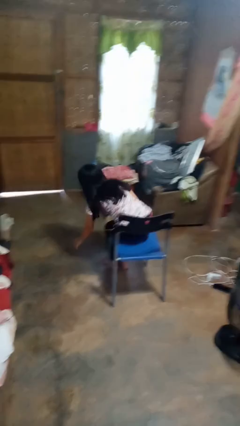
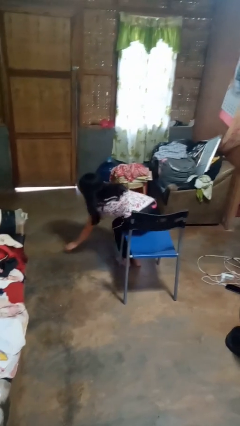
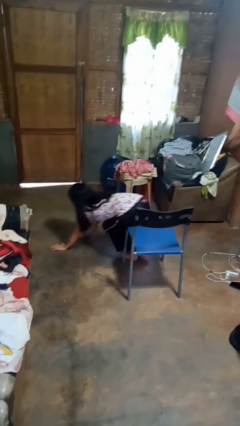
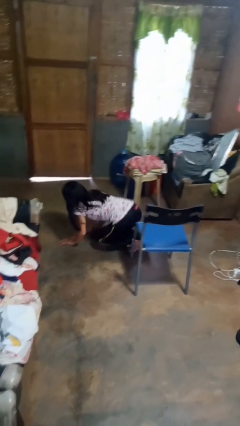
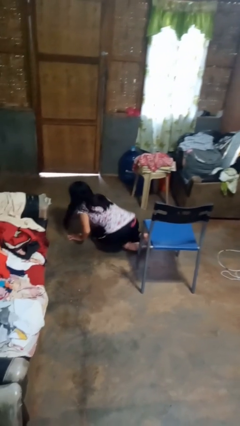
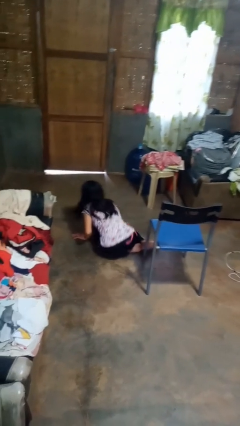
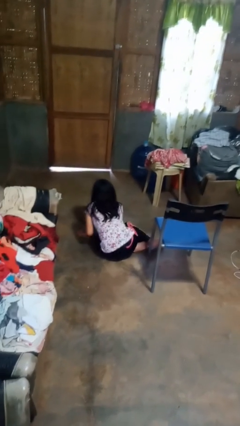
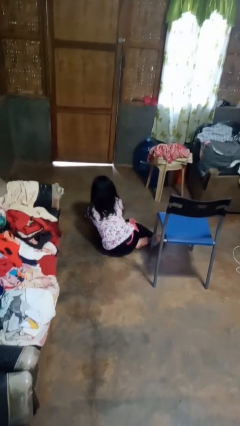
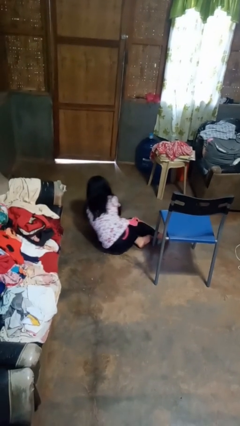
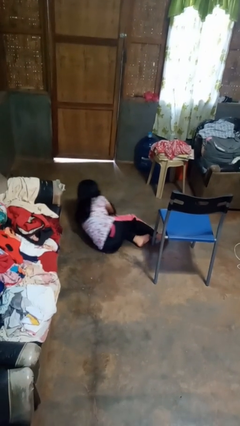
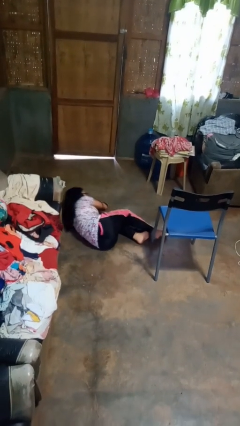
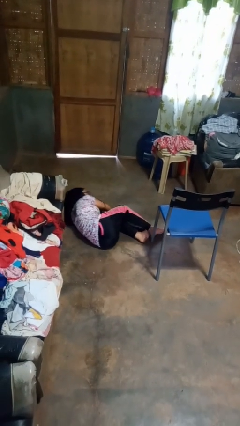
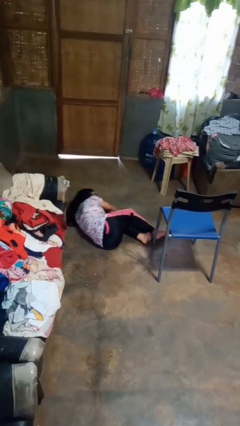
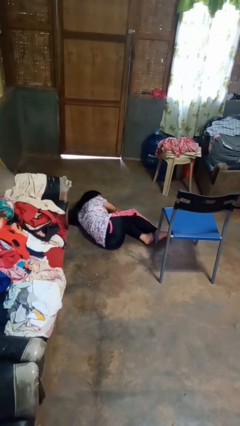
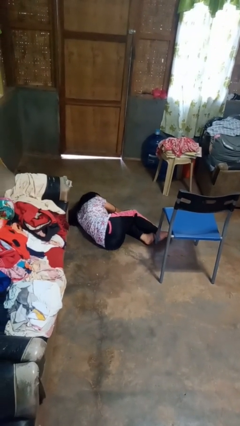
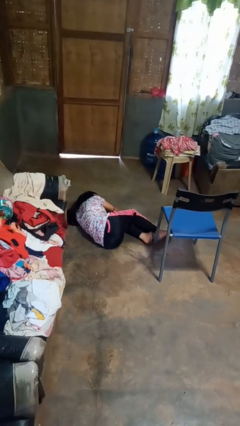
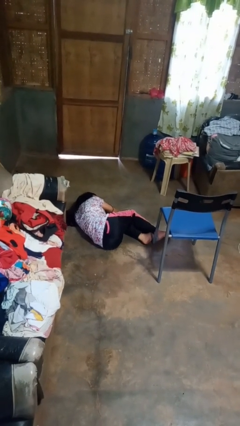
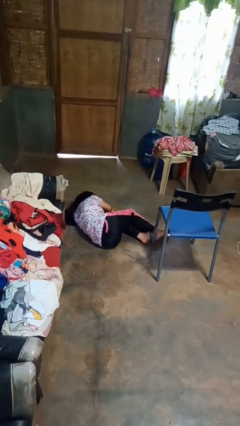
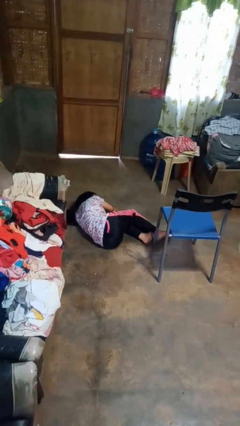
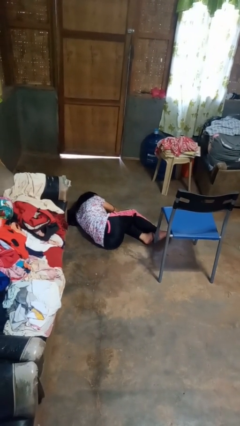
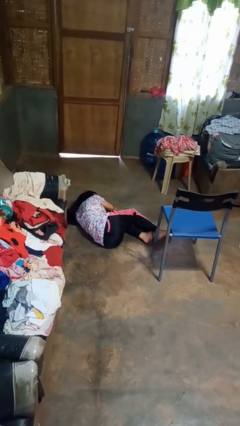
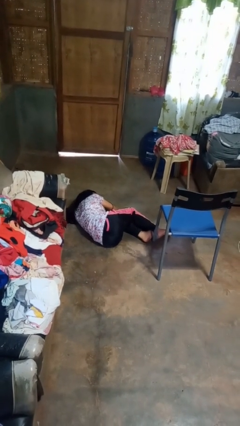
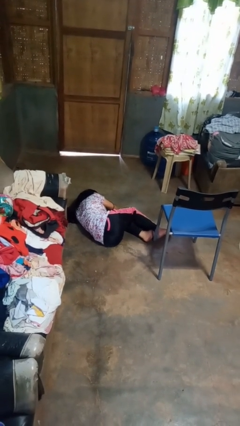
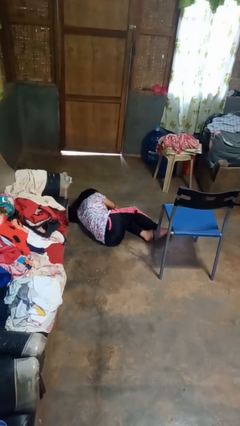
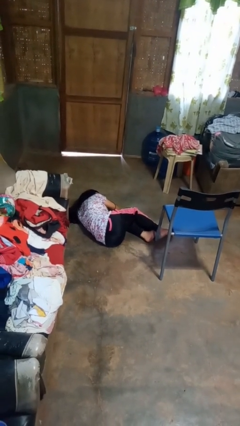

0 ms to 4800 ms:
person falls from chair

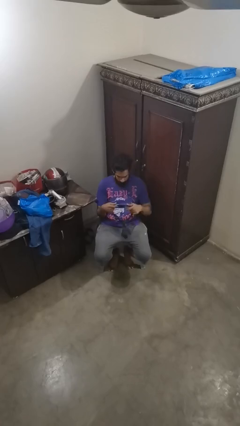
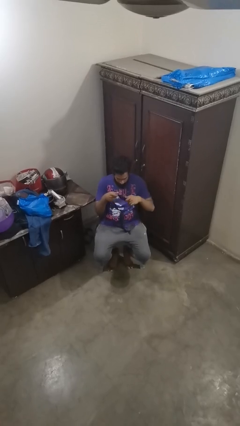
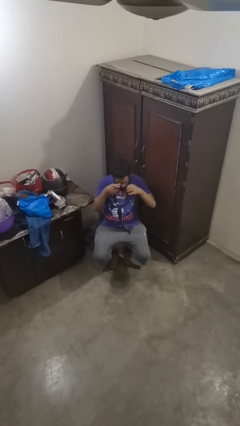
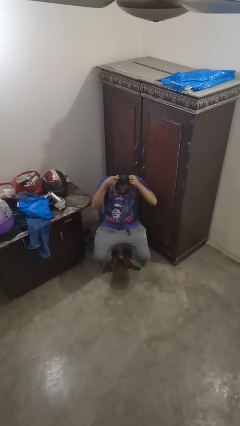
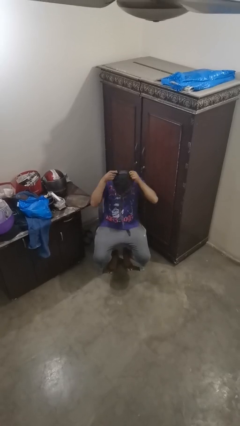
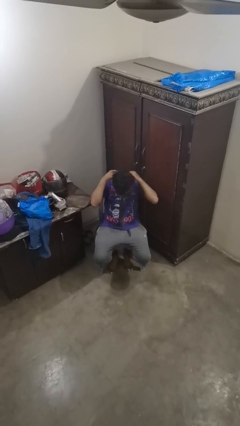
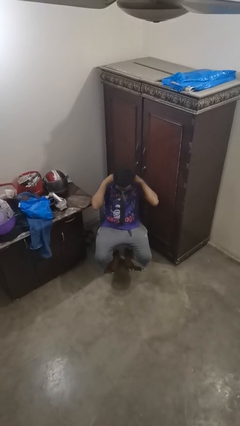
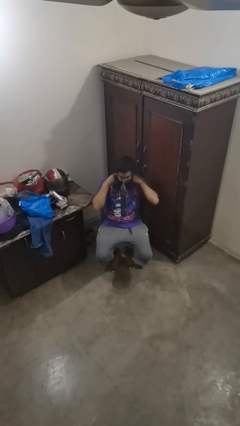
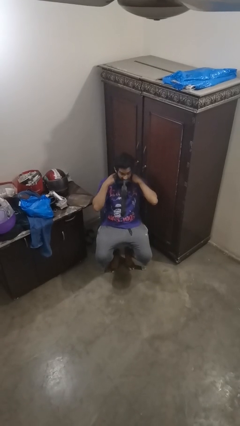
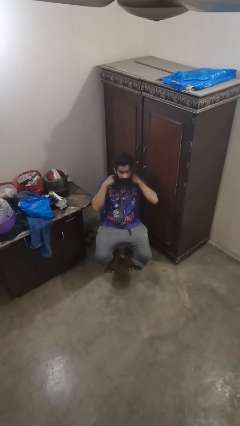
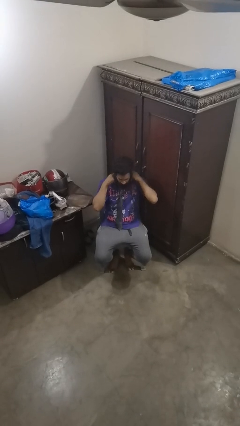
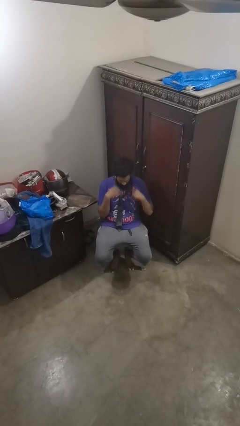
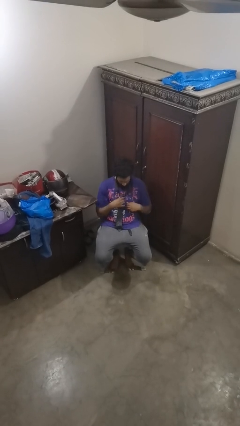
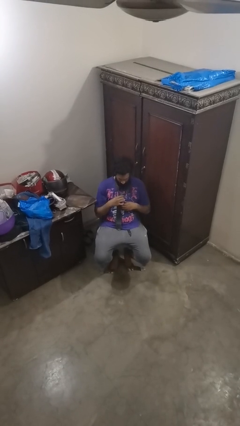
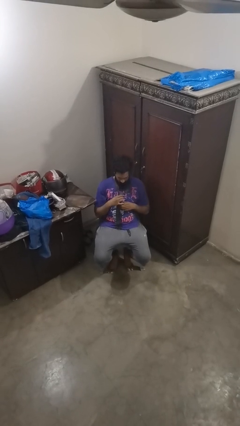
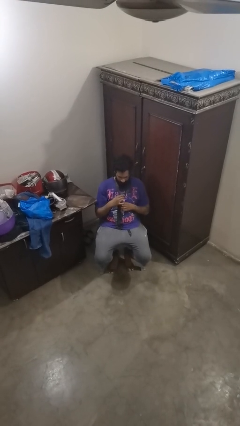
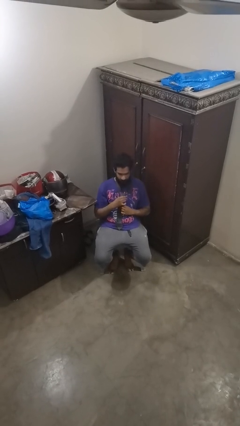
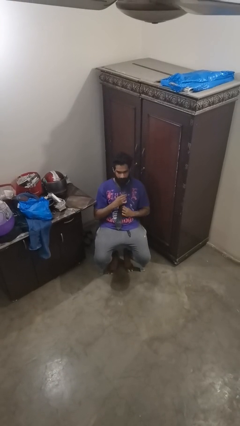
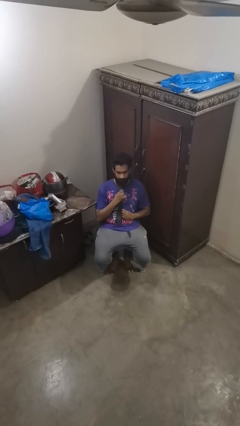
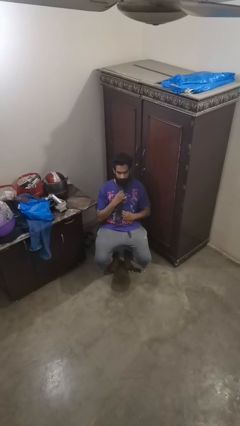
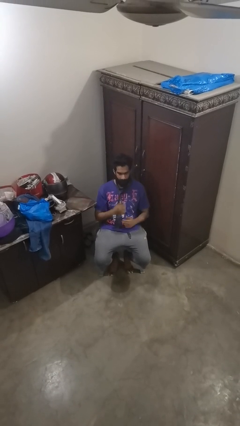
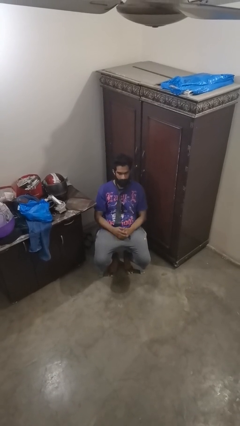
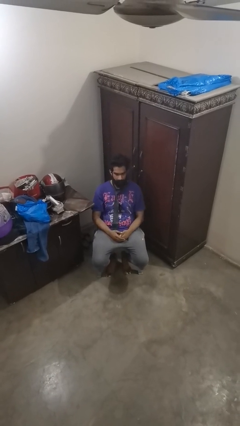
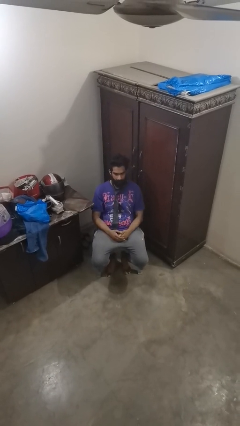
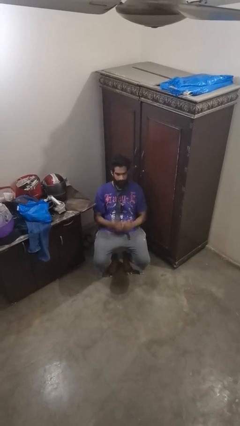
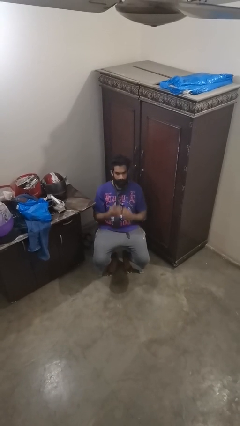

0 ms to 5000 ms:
person puts on necktie

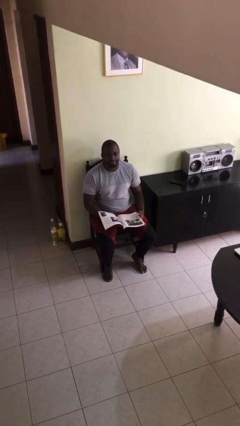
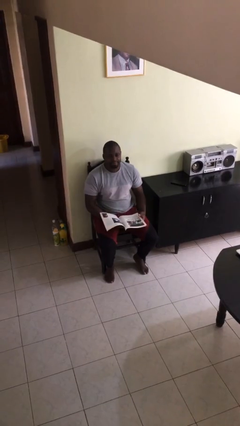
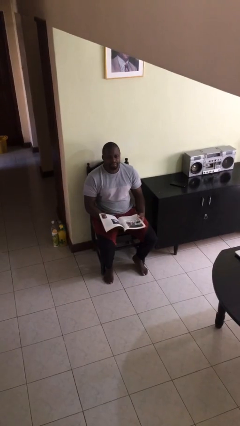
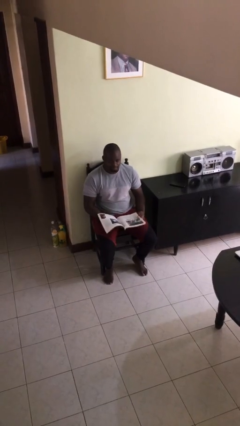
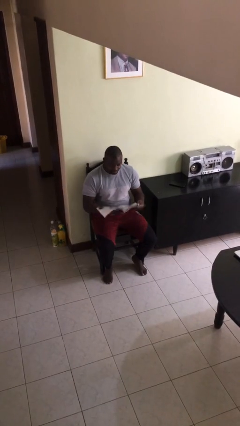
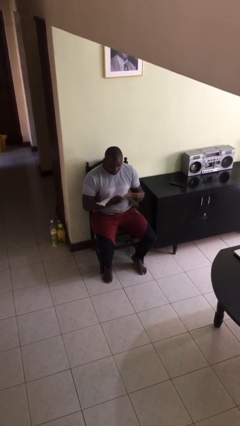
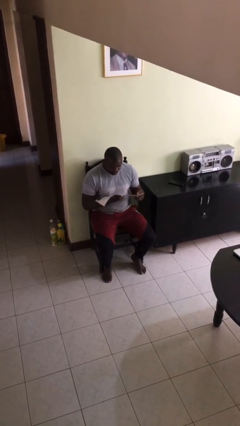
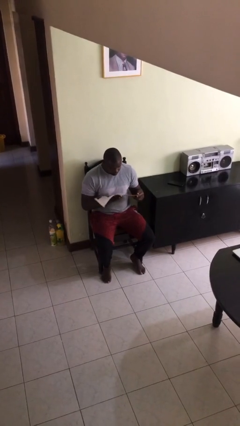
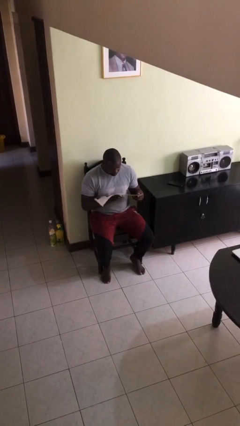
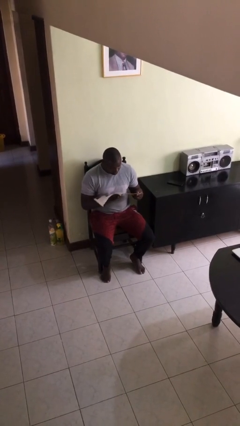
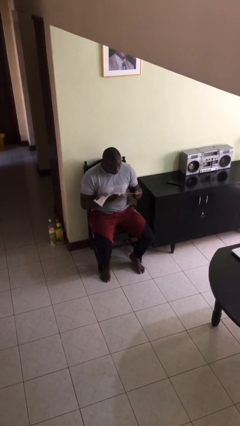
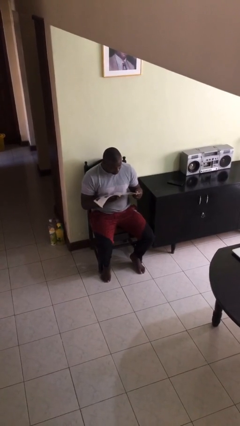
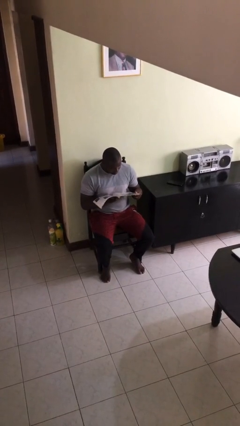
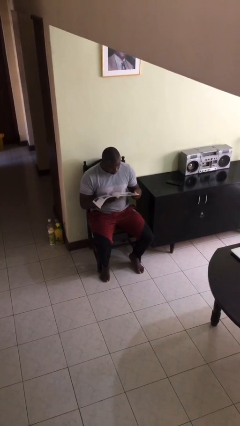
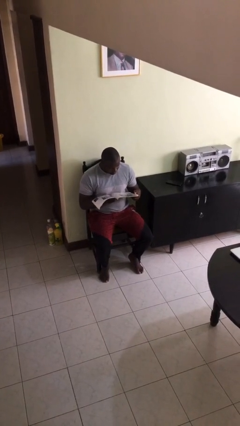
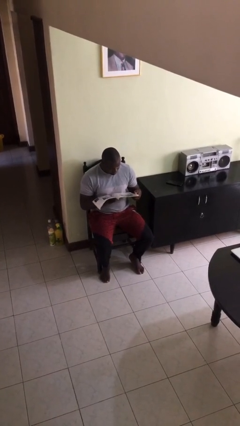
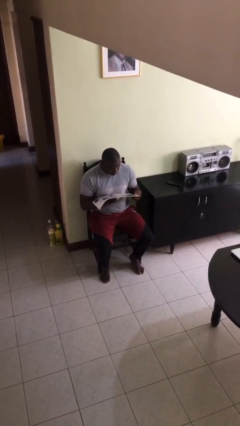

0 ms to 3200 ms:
person reads document

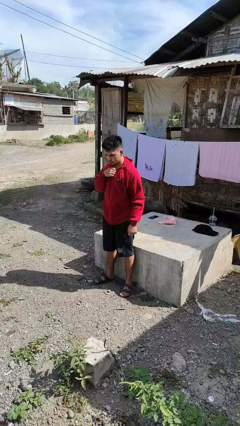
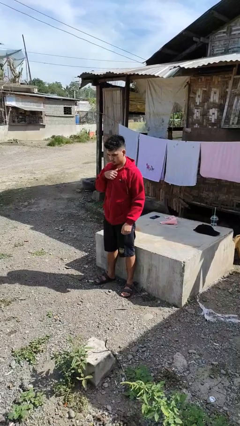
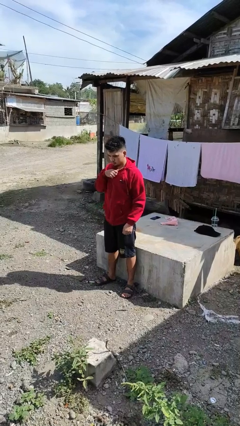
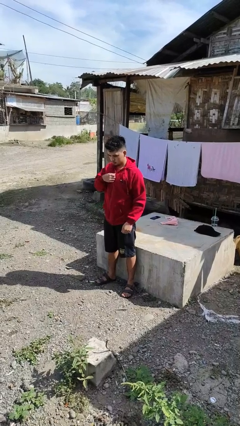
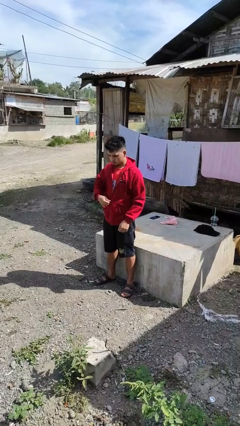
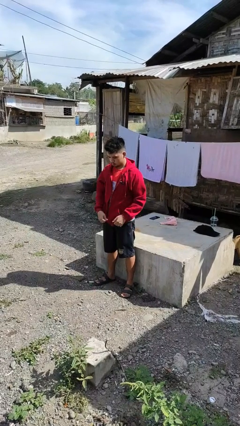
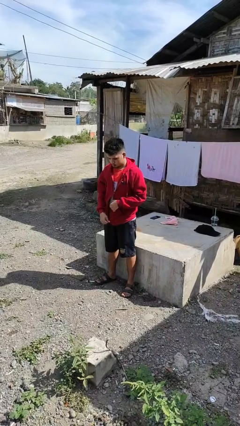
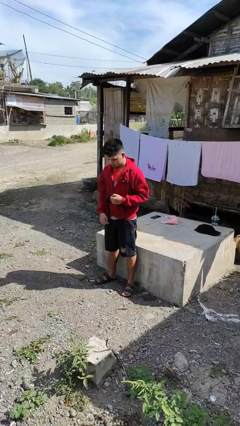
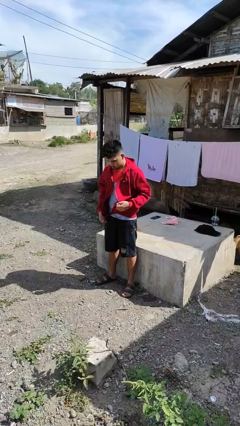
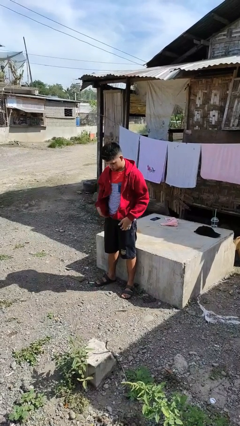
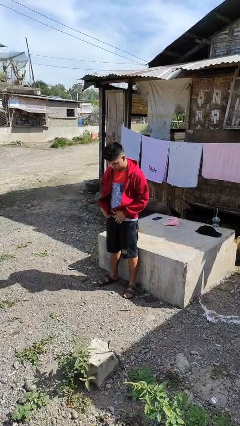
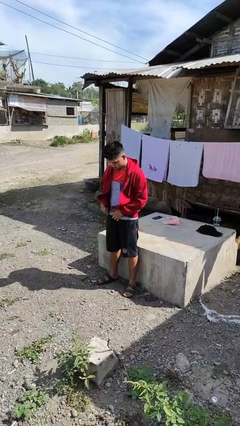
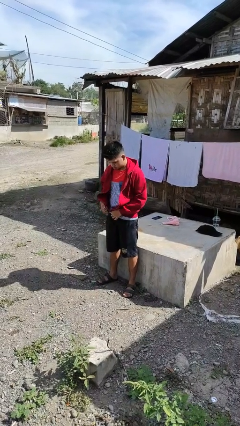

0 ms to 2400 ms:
person unzips jacket

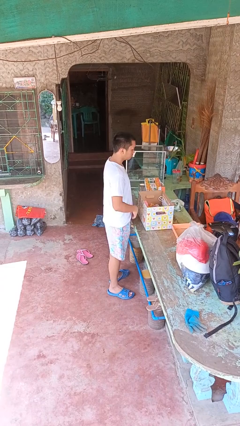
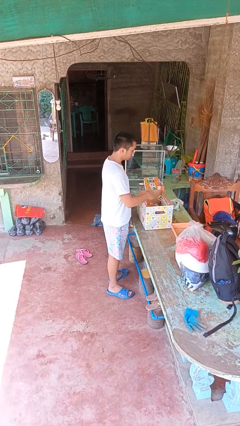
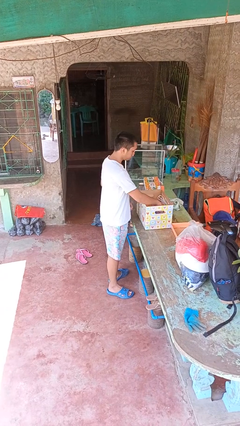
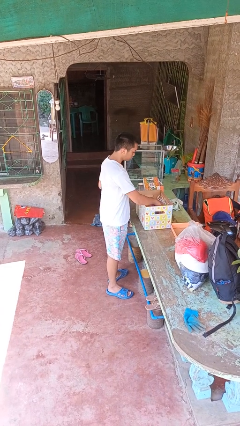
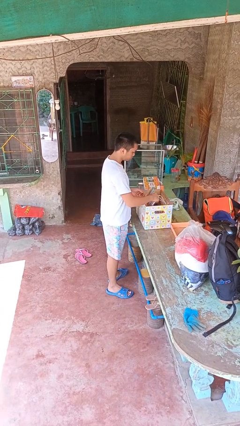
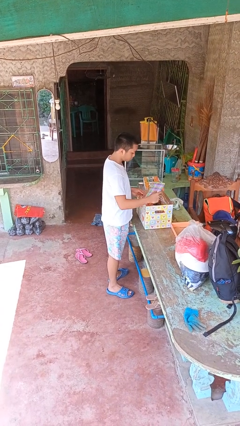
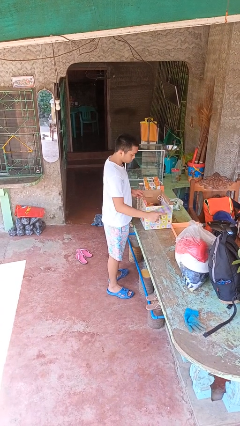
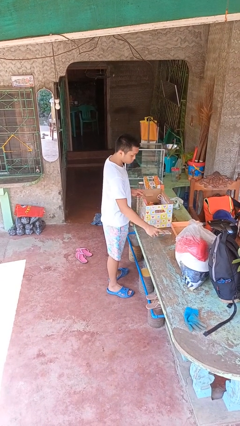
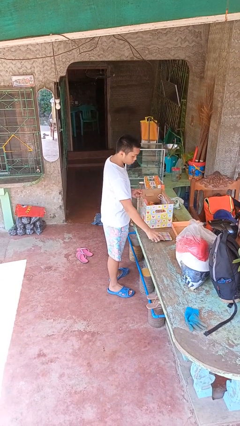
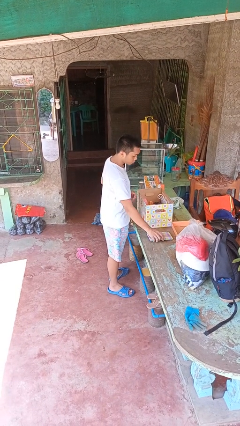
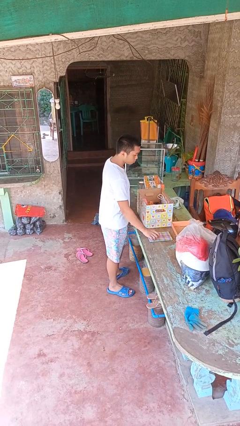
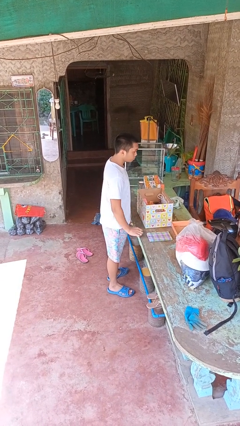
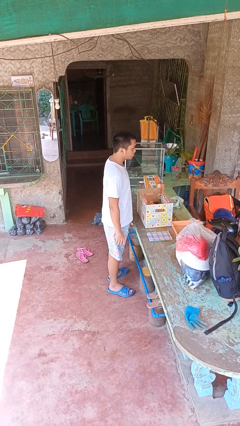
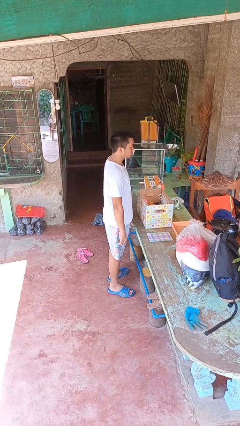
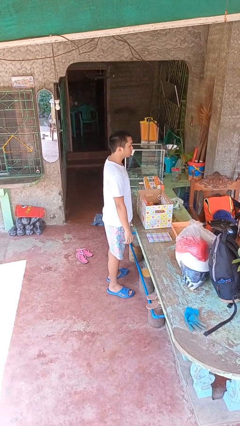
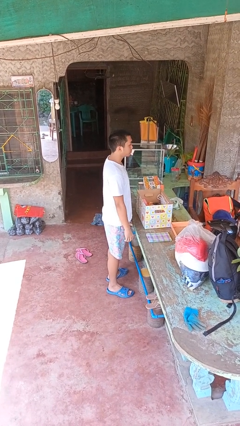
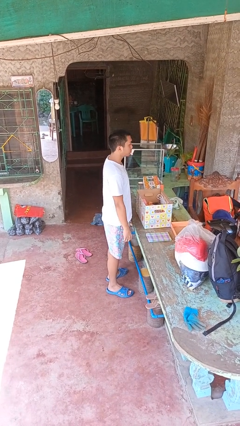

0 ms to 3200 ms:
person takes object from box
